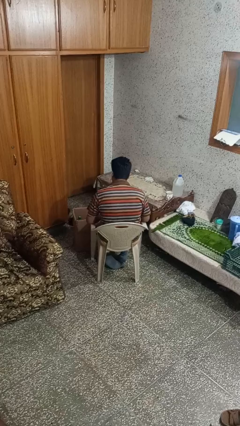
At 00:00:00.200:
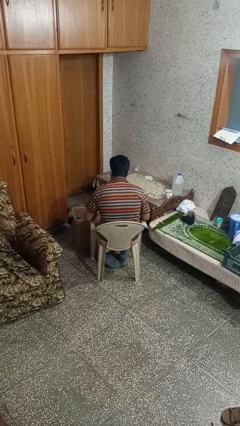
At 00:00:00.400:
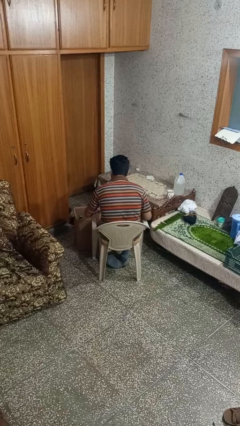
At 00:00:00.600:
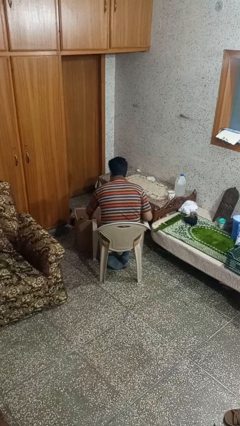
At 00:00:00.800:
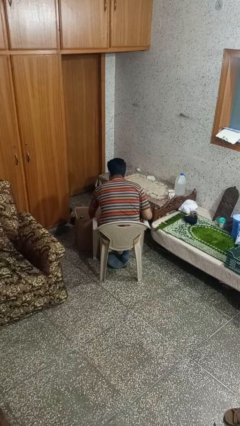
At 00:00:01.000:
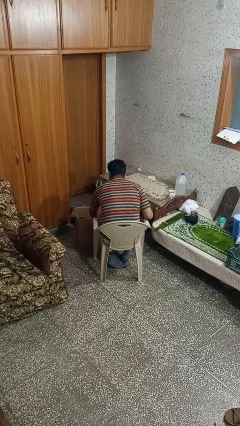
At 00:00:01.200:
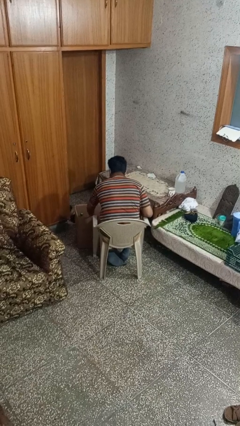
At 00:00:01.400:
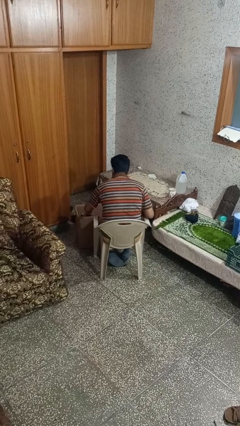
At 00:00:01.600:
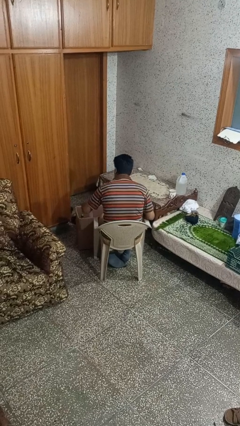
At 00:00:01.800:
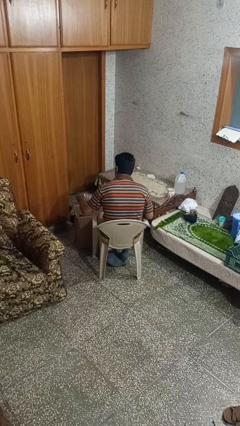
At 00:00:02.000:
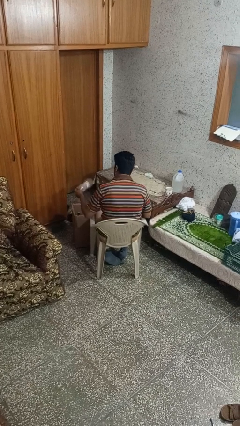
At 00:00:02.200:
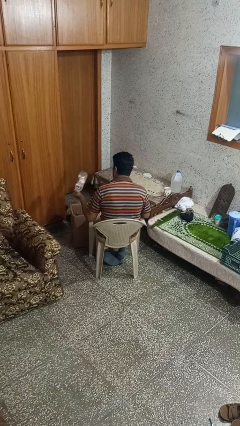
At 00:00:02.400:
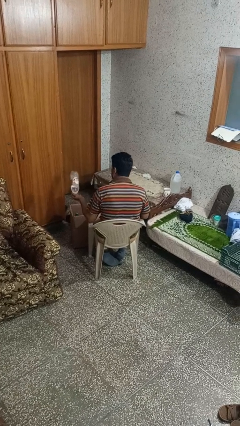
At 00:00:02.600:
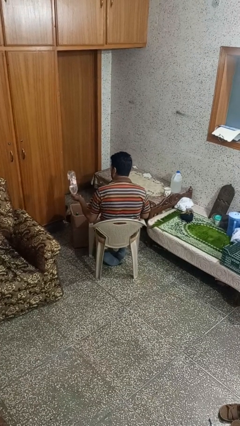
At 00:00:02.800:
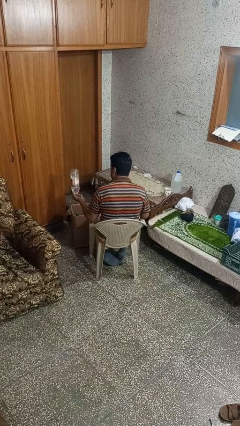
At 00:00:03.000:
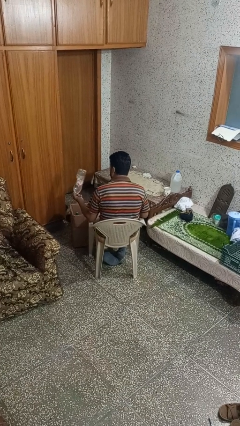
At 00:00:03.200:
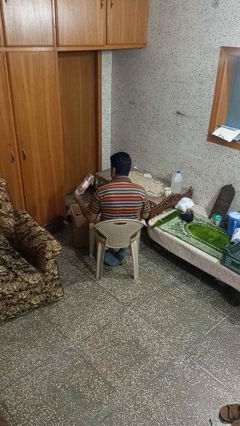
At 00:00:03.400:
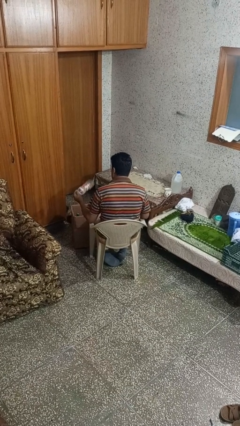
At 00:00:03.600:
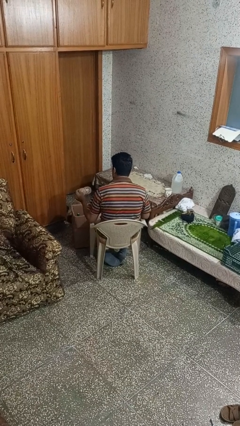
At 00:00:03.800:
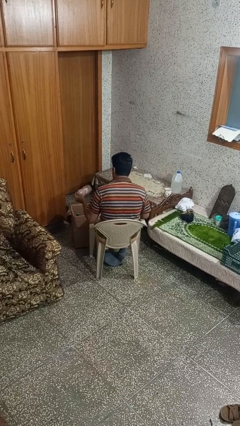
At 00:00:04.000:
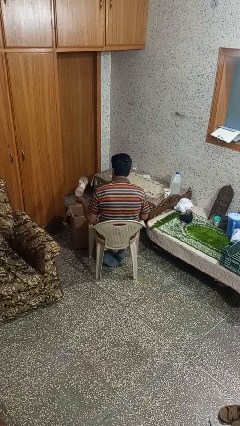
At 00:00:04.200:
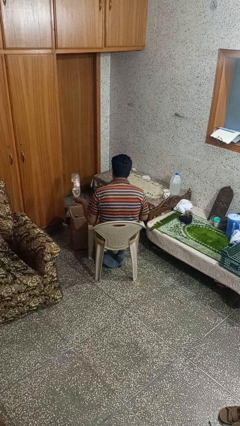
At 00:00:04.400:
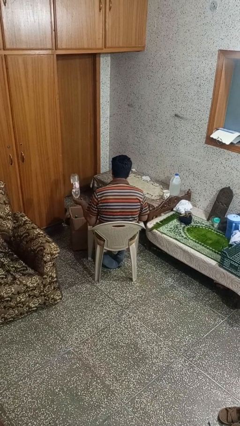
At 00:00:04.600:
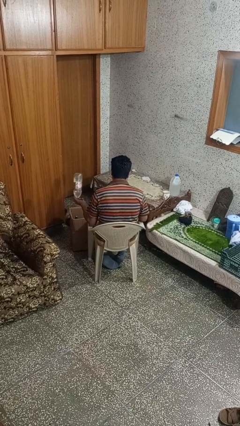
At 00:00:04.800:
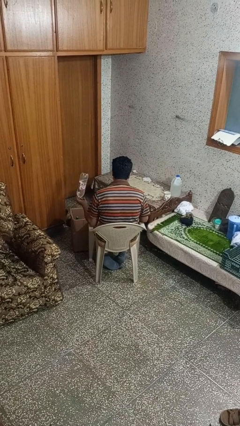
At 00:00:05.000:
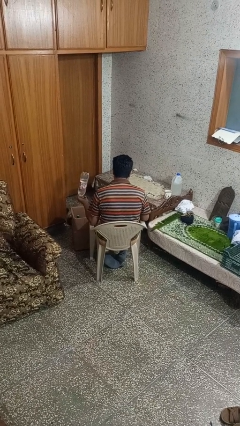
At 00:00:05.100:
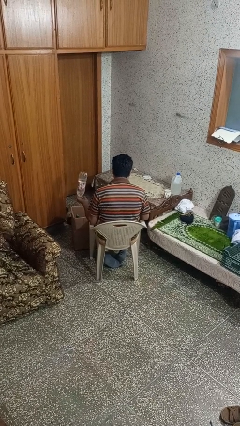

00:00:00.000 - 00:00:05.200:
person takes object from box

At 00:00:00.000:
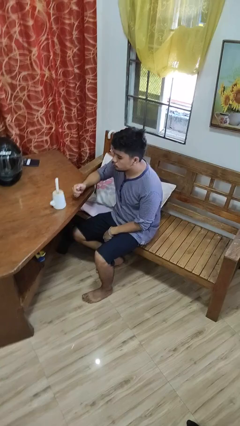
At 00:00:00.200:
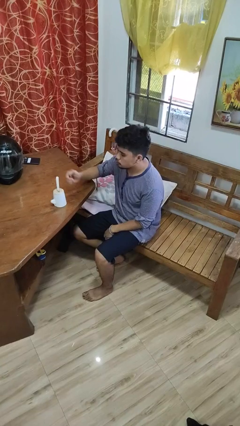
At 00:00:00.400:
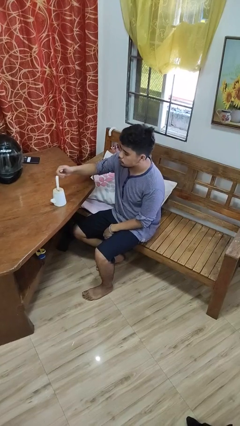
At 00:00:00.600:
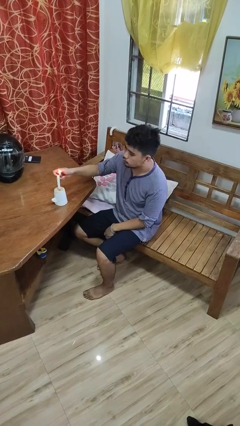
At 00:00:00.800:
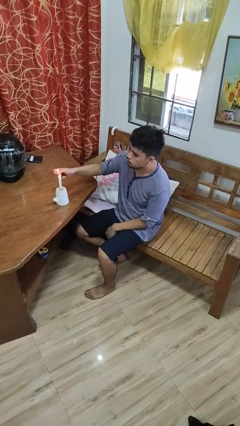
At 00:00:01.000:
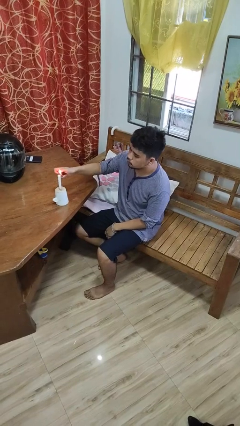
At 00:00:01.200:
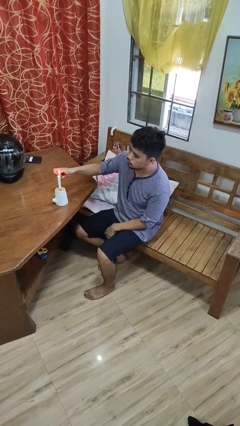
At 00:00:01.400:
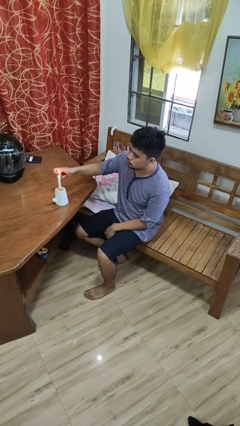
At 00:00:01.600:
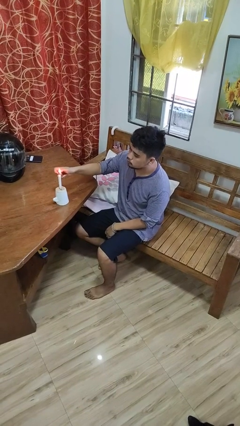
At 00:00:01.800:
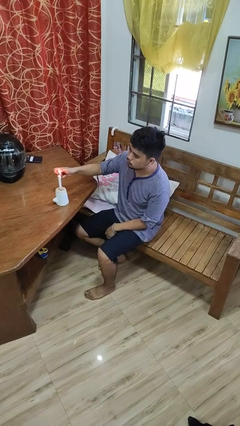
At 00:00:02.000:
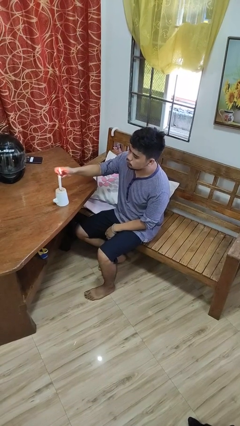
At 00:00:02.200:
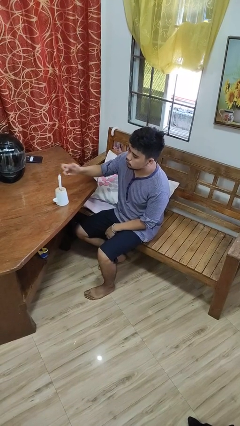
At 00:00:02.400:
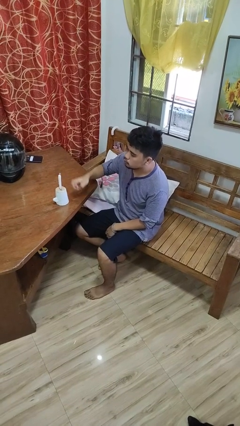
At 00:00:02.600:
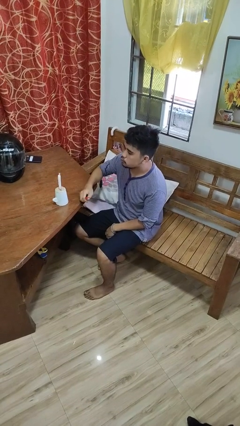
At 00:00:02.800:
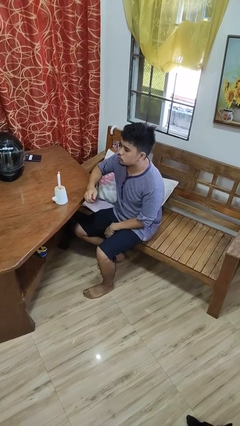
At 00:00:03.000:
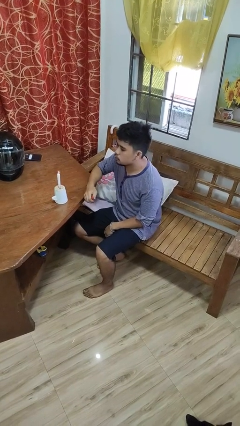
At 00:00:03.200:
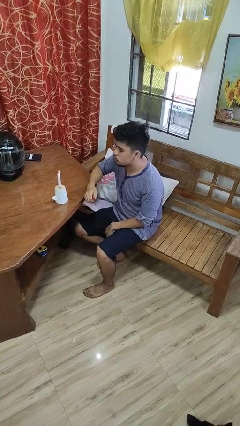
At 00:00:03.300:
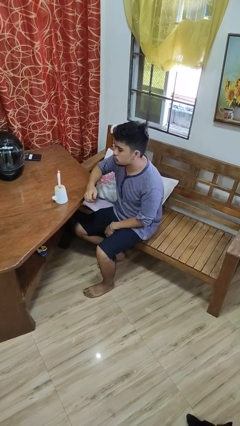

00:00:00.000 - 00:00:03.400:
person lights candle

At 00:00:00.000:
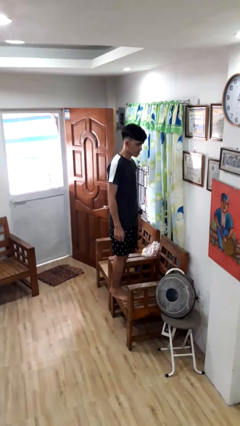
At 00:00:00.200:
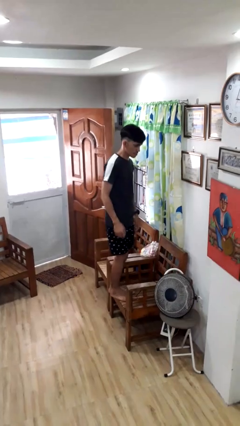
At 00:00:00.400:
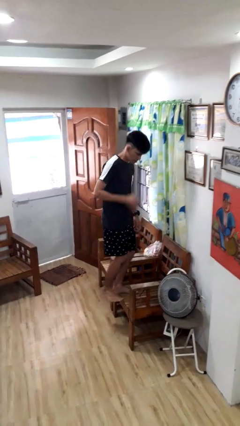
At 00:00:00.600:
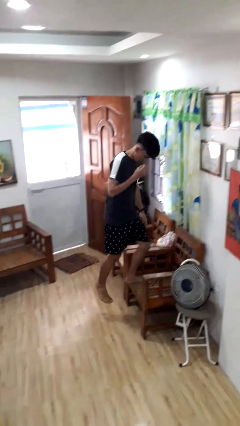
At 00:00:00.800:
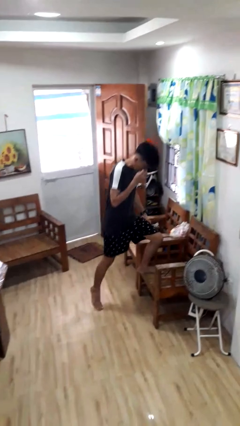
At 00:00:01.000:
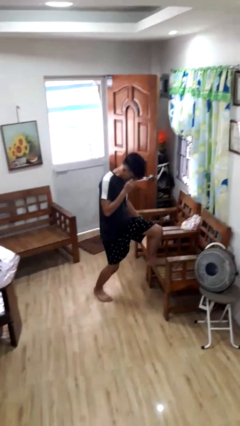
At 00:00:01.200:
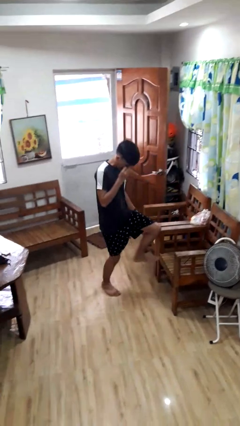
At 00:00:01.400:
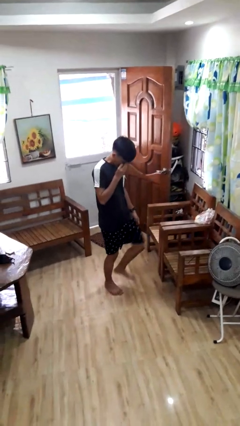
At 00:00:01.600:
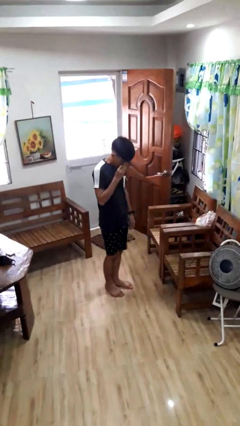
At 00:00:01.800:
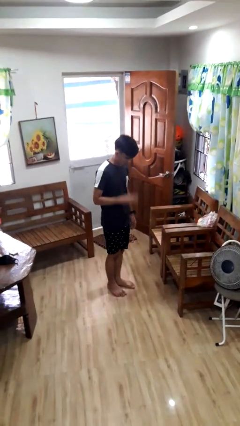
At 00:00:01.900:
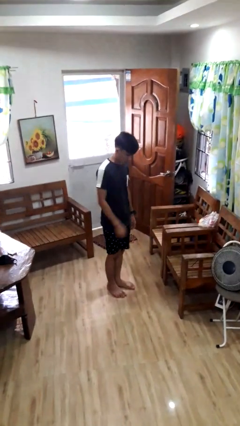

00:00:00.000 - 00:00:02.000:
person climbs off chair

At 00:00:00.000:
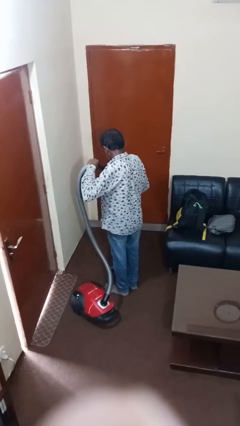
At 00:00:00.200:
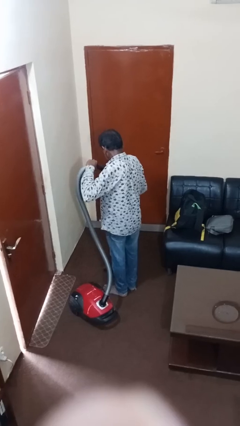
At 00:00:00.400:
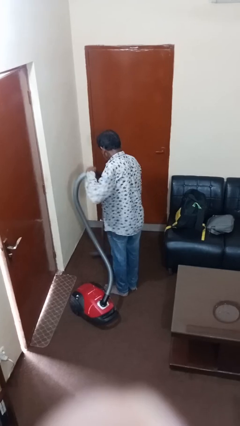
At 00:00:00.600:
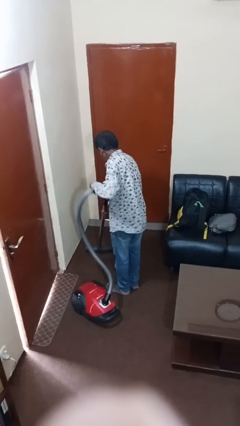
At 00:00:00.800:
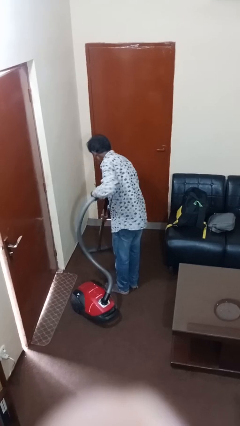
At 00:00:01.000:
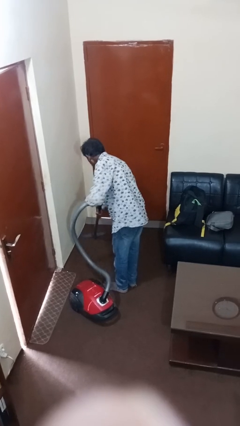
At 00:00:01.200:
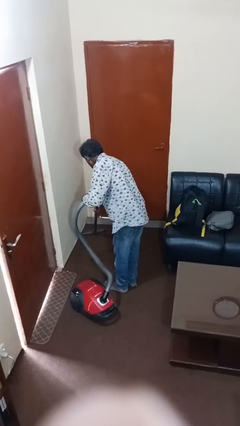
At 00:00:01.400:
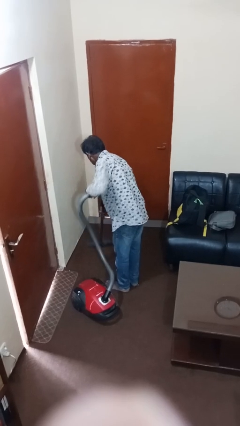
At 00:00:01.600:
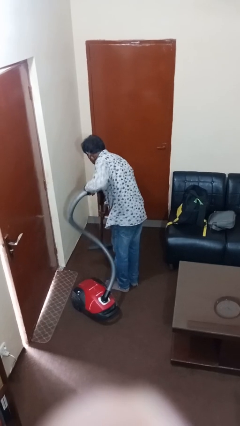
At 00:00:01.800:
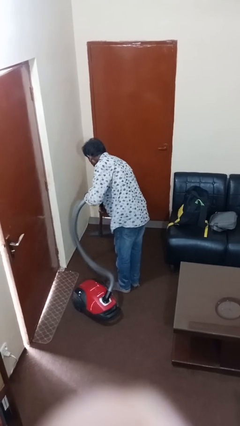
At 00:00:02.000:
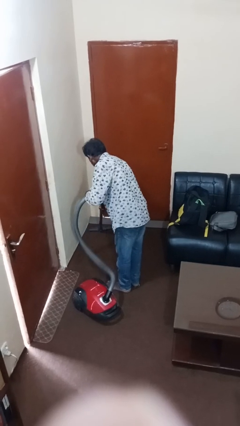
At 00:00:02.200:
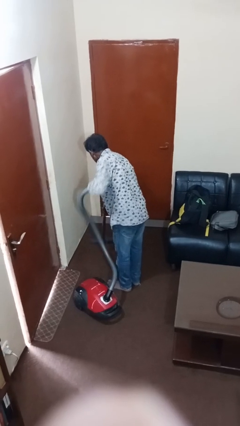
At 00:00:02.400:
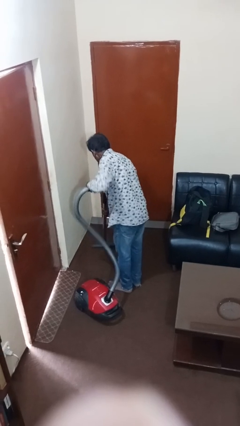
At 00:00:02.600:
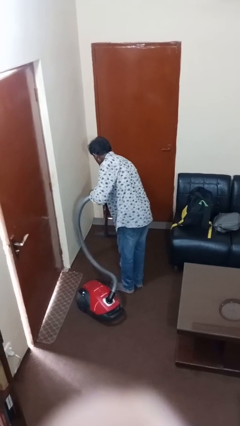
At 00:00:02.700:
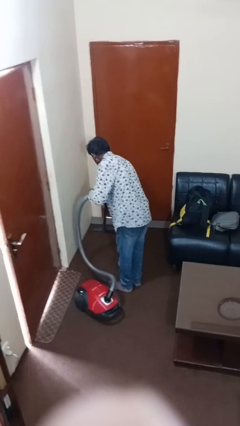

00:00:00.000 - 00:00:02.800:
person vacuums carpet

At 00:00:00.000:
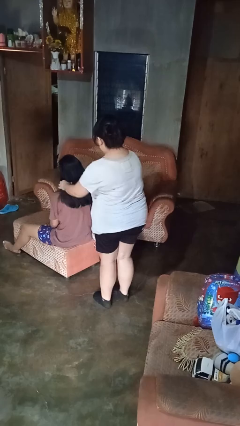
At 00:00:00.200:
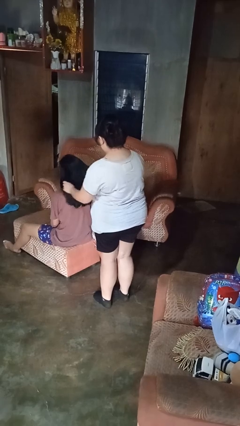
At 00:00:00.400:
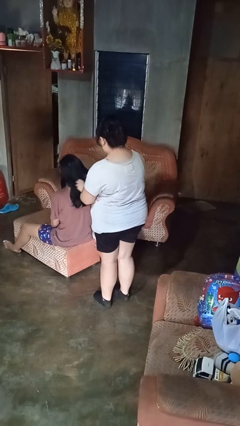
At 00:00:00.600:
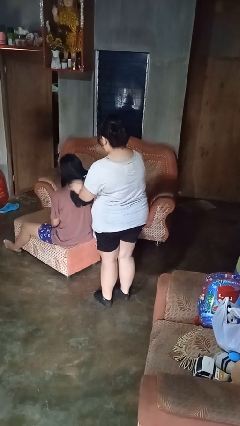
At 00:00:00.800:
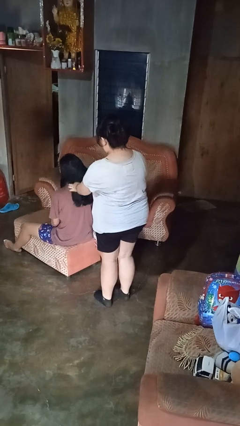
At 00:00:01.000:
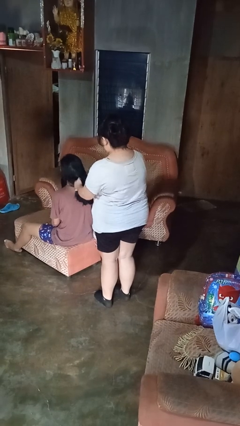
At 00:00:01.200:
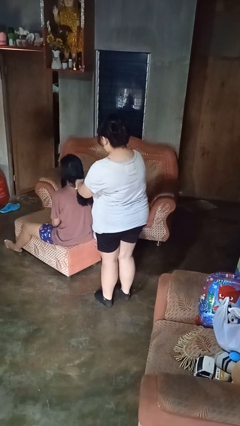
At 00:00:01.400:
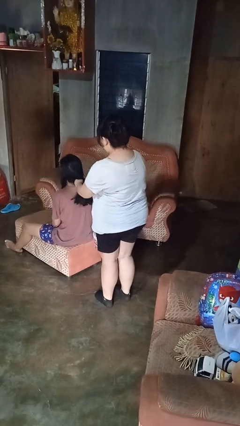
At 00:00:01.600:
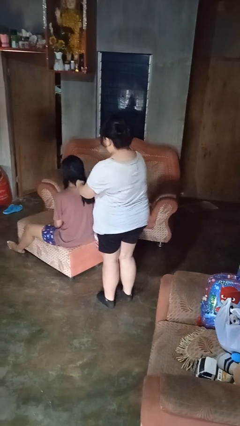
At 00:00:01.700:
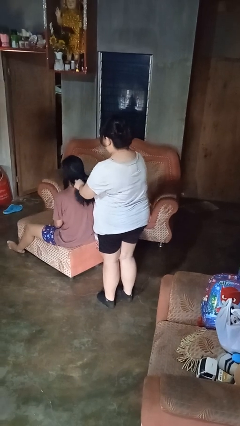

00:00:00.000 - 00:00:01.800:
person braids hair of person

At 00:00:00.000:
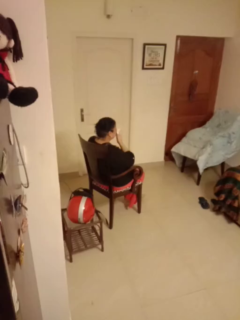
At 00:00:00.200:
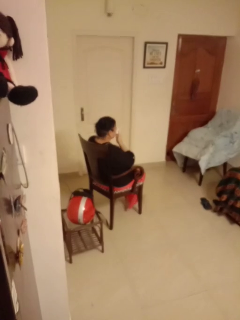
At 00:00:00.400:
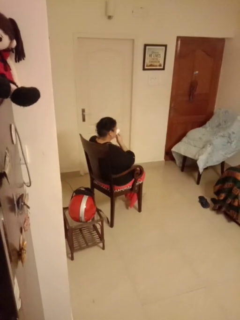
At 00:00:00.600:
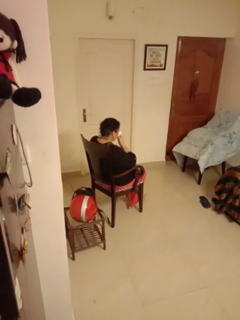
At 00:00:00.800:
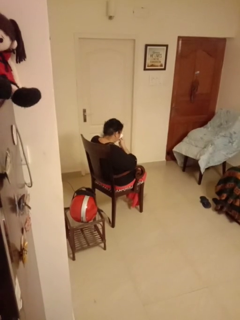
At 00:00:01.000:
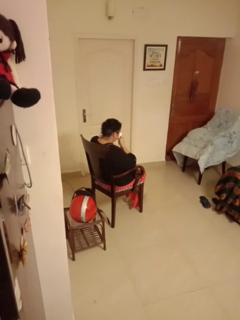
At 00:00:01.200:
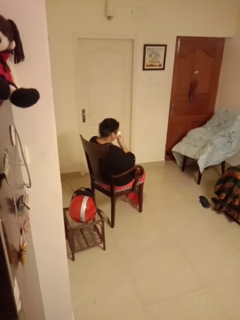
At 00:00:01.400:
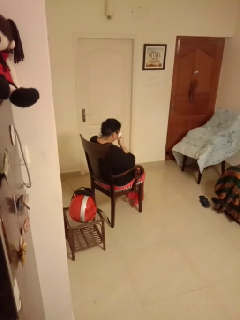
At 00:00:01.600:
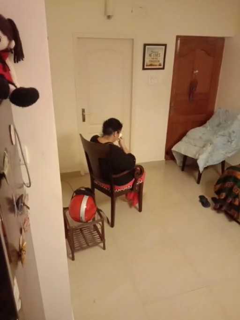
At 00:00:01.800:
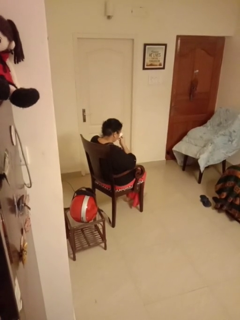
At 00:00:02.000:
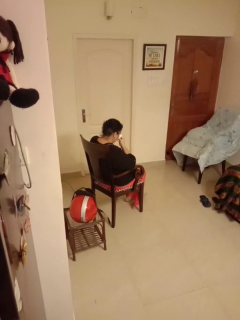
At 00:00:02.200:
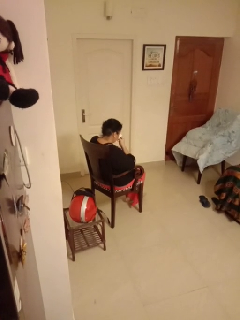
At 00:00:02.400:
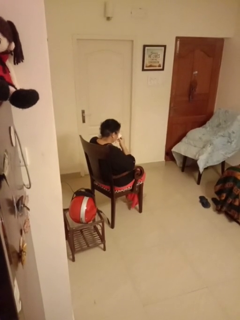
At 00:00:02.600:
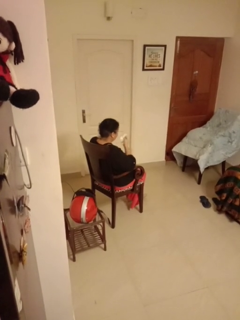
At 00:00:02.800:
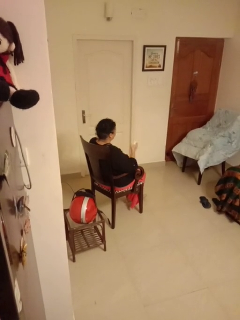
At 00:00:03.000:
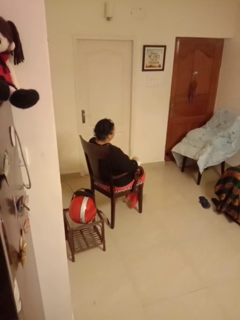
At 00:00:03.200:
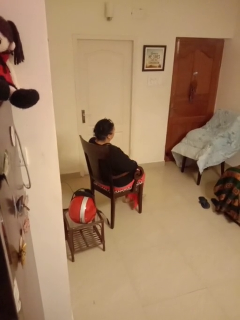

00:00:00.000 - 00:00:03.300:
person blows nose
